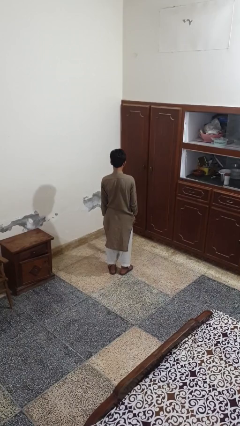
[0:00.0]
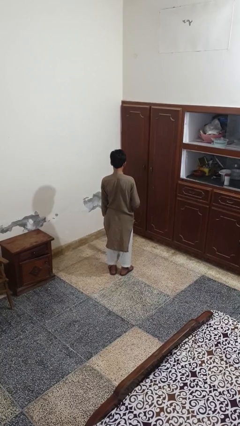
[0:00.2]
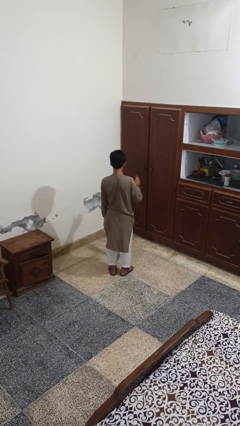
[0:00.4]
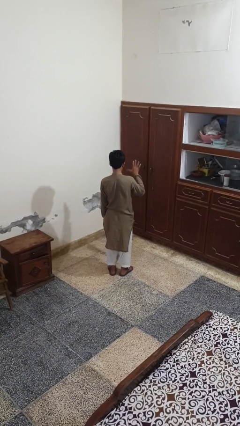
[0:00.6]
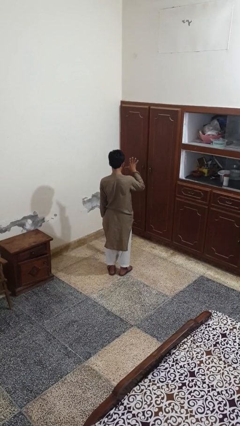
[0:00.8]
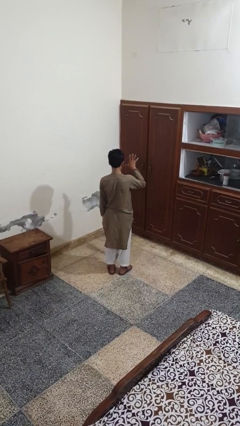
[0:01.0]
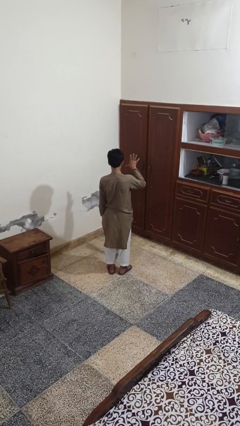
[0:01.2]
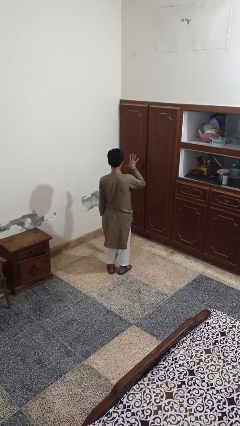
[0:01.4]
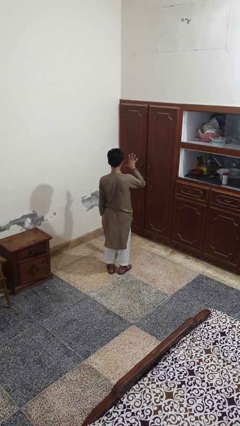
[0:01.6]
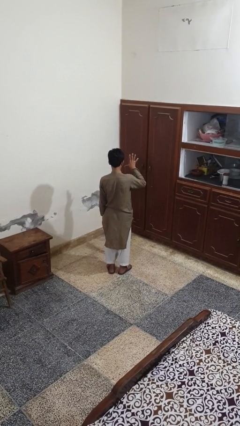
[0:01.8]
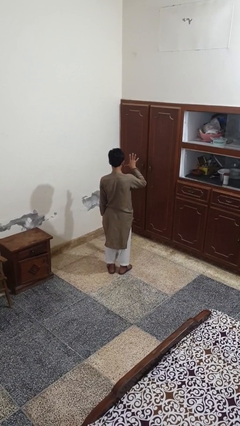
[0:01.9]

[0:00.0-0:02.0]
person gestures number five

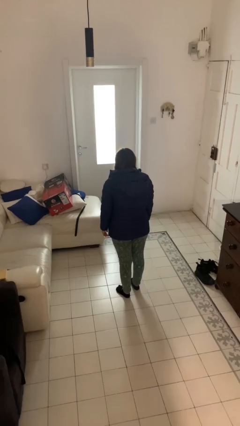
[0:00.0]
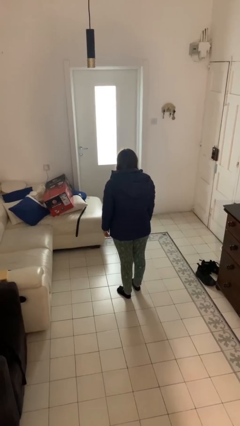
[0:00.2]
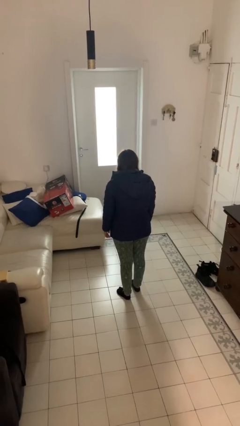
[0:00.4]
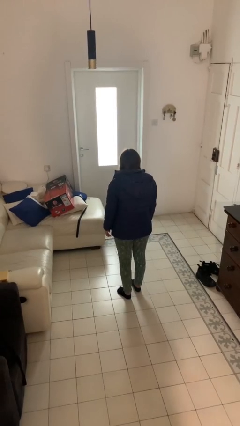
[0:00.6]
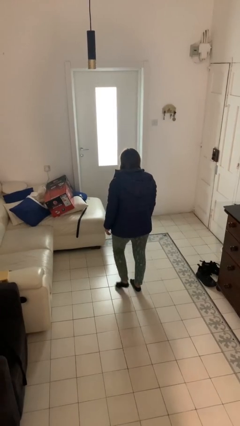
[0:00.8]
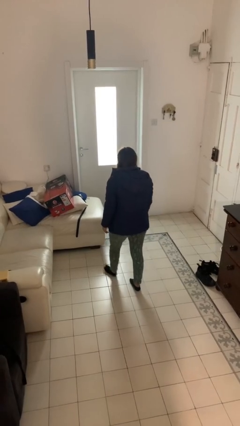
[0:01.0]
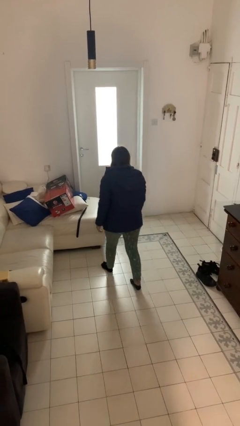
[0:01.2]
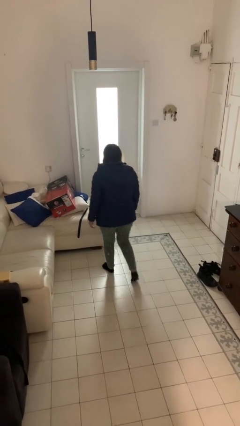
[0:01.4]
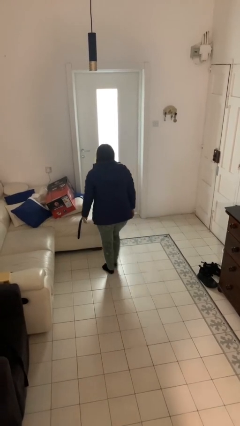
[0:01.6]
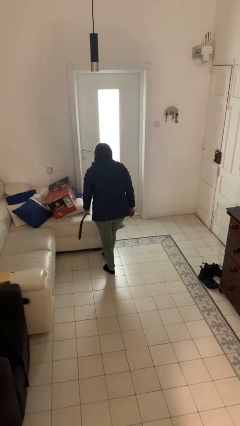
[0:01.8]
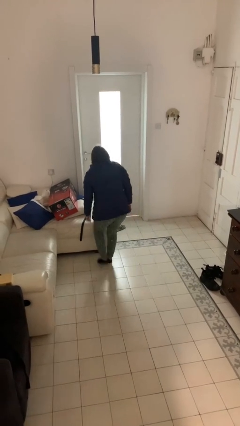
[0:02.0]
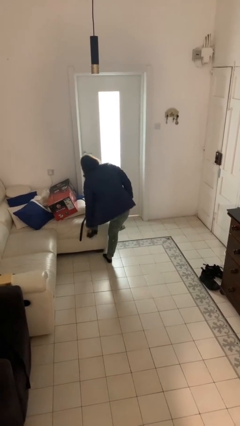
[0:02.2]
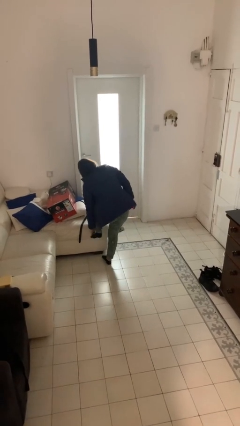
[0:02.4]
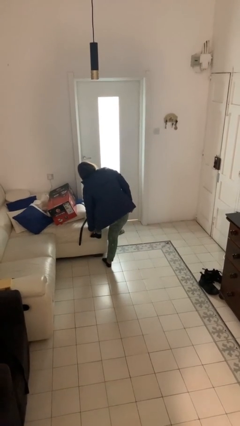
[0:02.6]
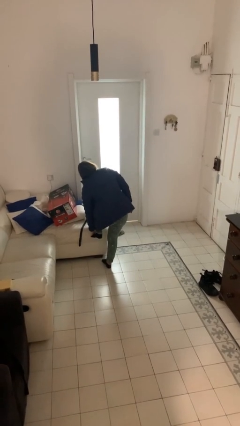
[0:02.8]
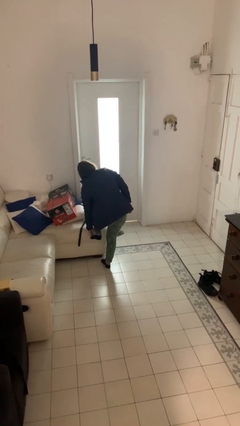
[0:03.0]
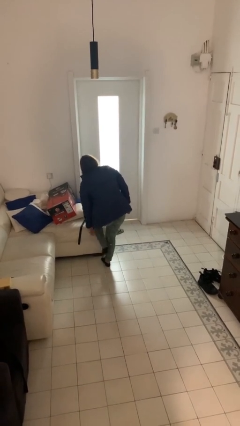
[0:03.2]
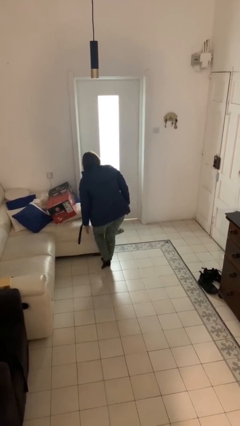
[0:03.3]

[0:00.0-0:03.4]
person stubs toe

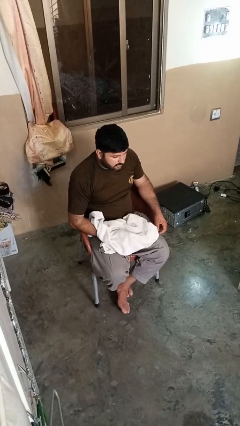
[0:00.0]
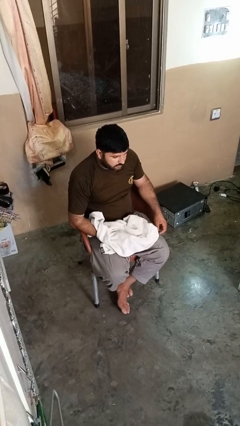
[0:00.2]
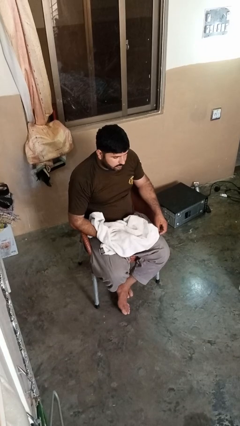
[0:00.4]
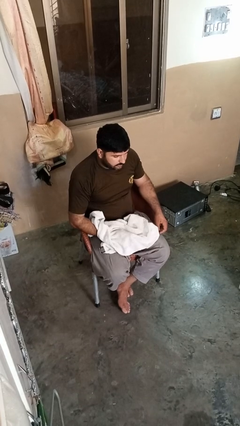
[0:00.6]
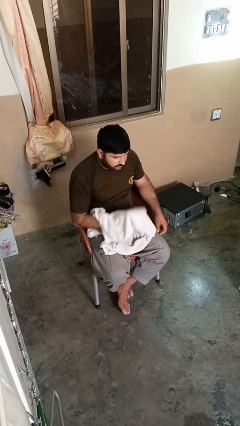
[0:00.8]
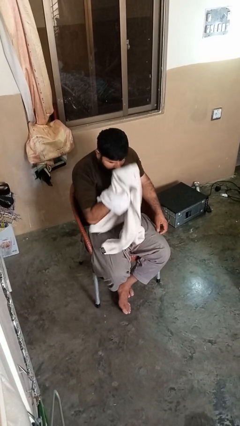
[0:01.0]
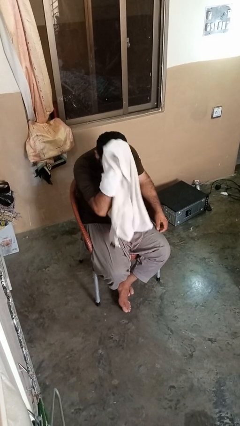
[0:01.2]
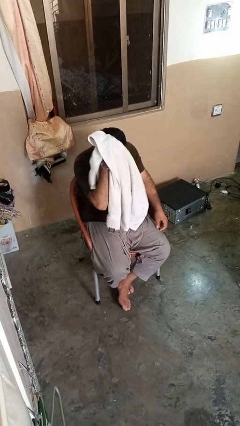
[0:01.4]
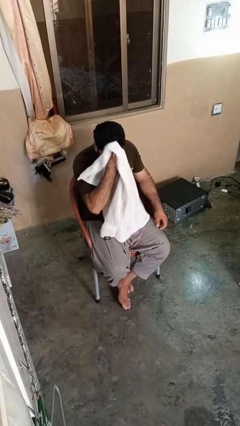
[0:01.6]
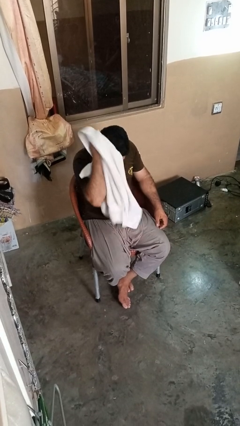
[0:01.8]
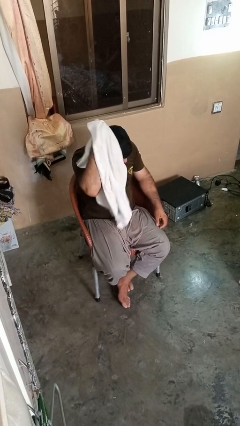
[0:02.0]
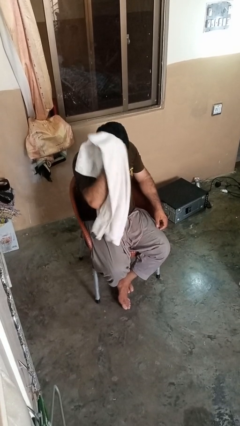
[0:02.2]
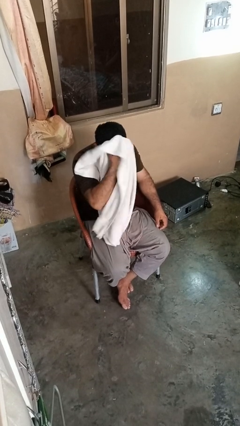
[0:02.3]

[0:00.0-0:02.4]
person dries hair with towel

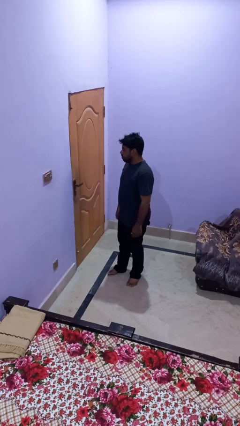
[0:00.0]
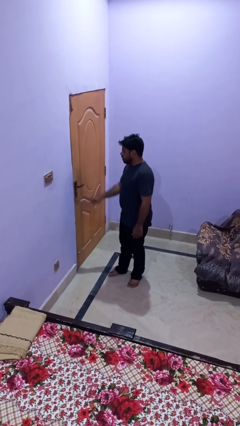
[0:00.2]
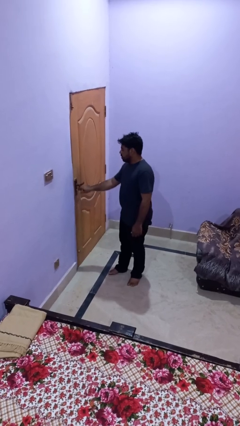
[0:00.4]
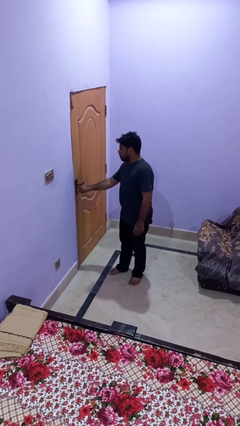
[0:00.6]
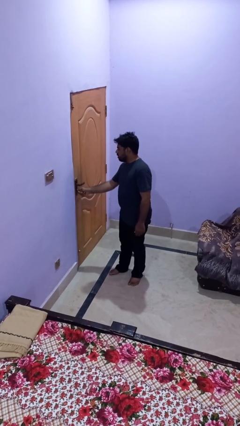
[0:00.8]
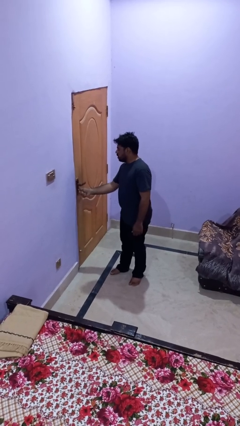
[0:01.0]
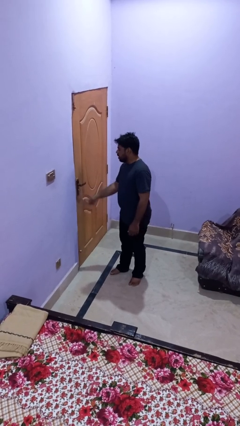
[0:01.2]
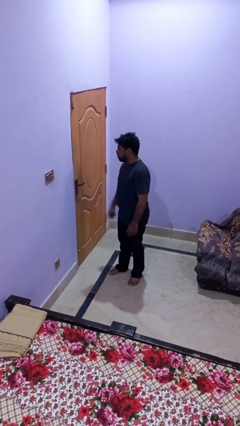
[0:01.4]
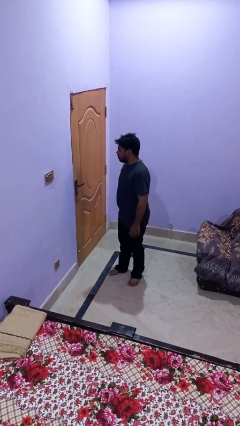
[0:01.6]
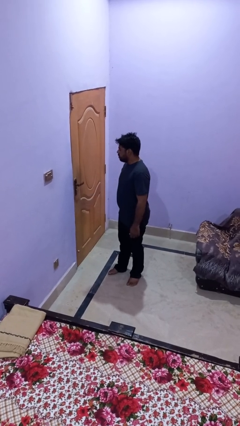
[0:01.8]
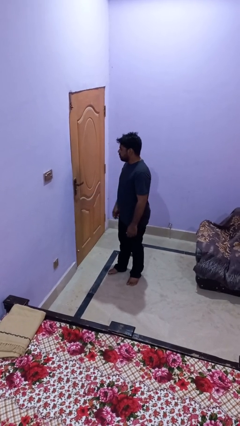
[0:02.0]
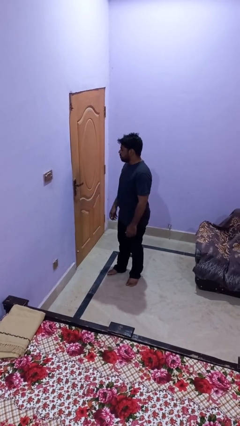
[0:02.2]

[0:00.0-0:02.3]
person unlocks door with keys

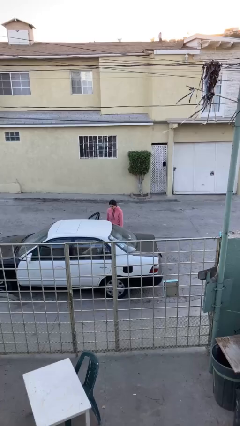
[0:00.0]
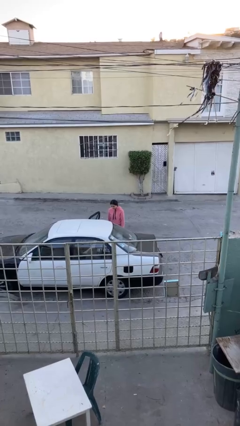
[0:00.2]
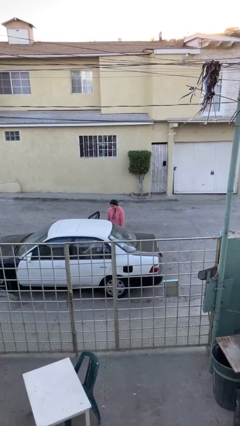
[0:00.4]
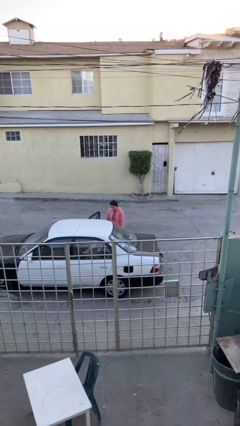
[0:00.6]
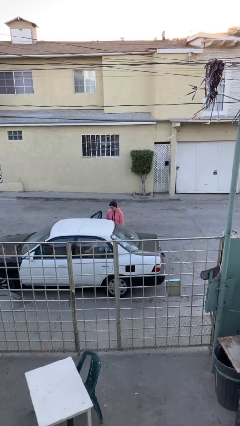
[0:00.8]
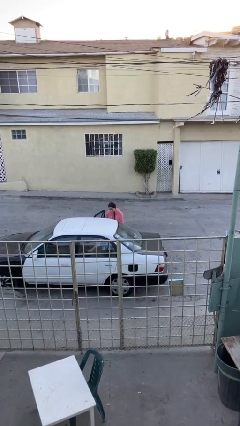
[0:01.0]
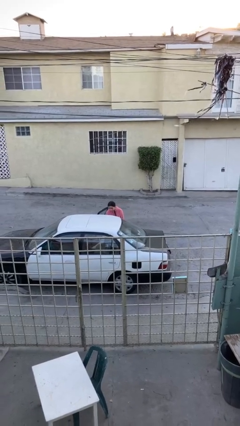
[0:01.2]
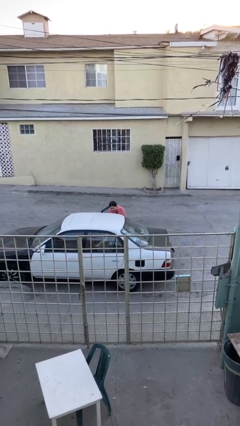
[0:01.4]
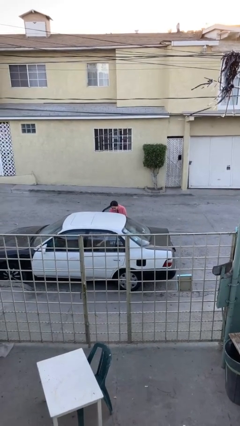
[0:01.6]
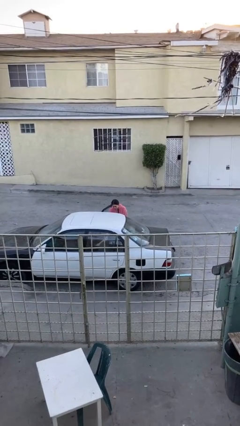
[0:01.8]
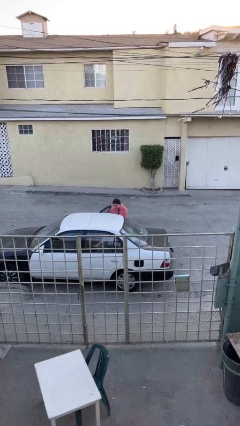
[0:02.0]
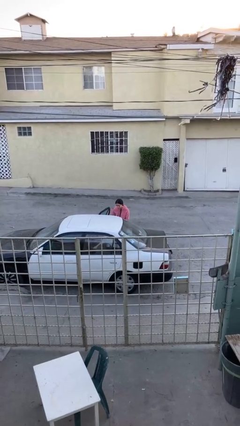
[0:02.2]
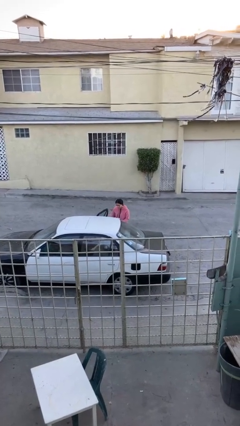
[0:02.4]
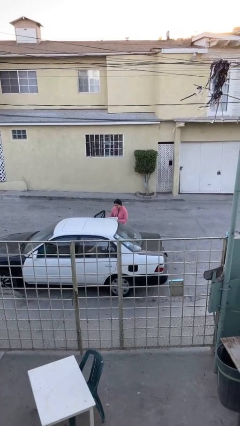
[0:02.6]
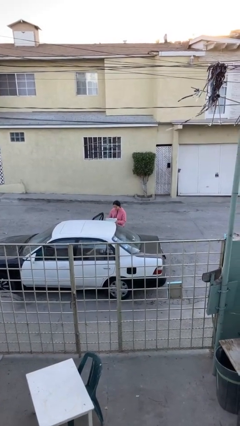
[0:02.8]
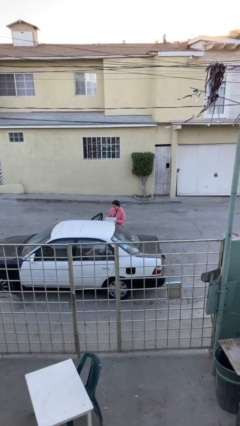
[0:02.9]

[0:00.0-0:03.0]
person unloads car

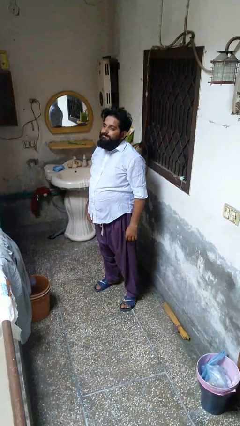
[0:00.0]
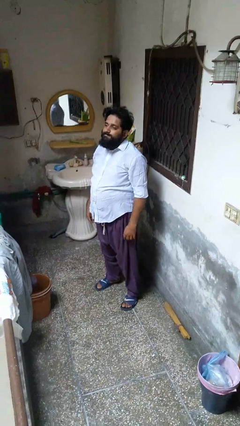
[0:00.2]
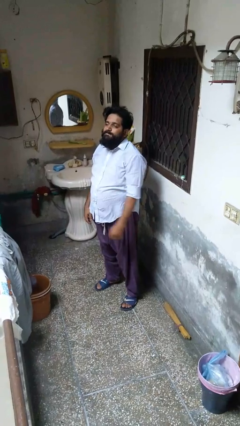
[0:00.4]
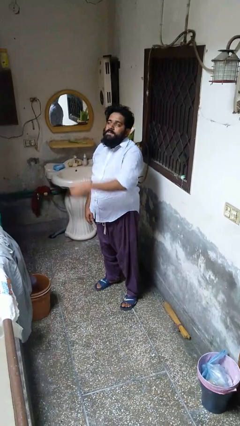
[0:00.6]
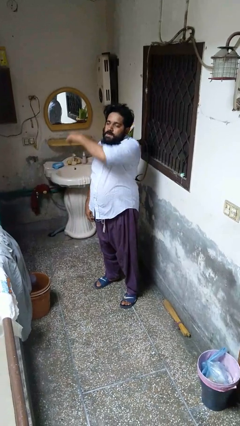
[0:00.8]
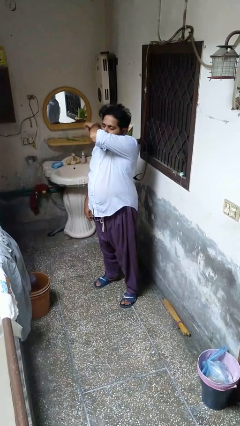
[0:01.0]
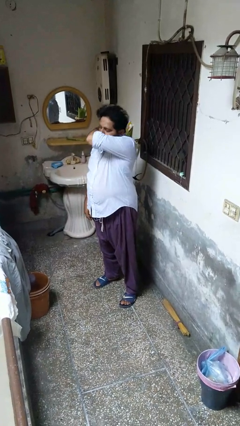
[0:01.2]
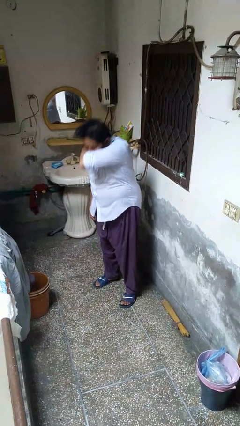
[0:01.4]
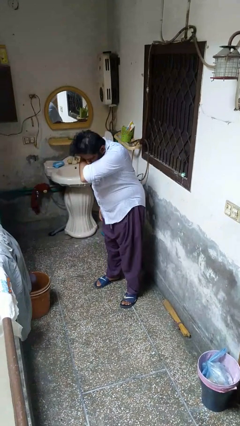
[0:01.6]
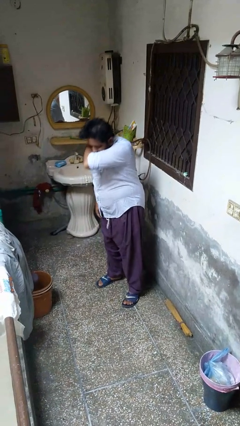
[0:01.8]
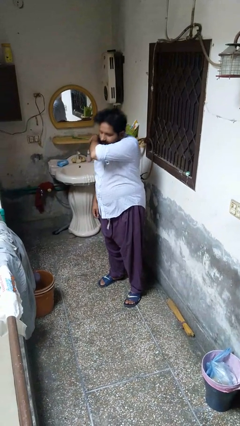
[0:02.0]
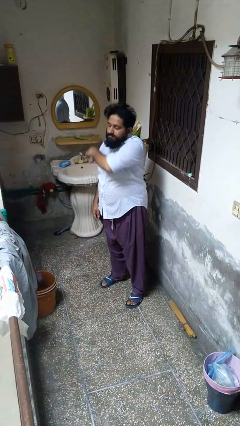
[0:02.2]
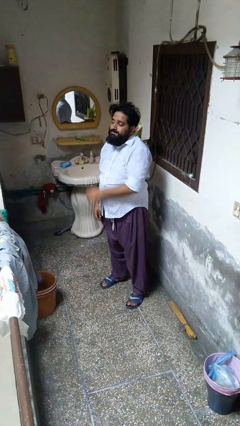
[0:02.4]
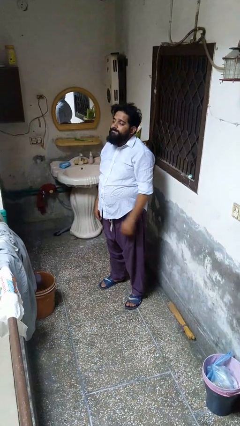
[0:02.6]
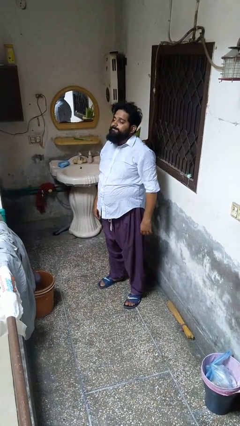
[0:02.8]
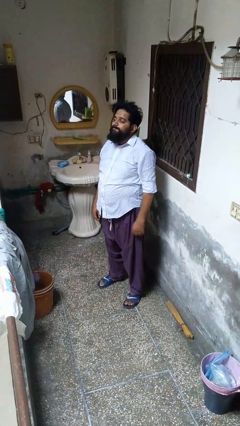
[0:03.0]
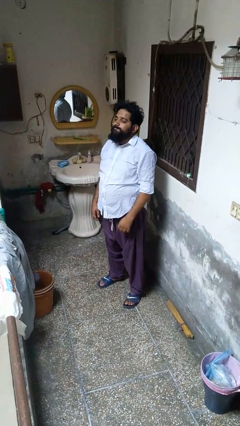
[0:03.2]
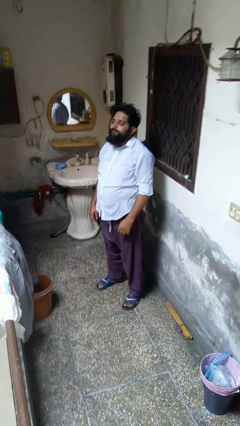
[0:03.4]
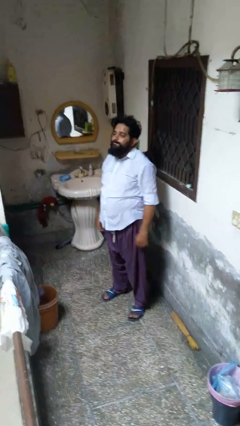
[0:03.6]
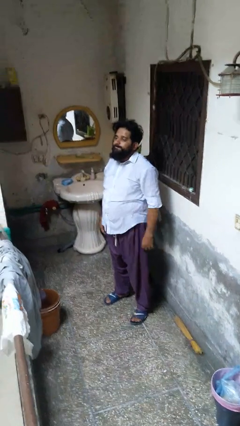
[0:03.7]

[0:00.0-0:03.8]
person sneezes into arm

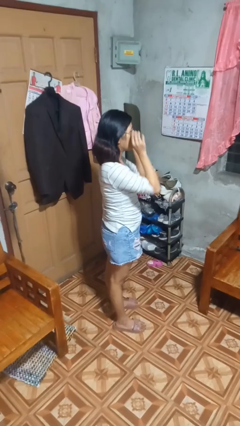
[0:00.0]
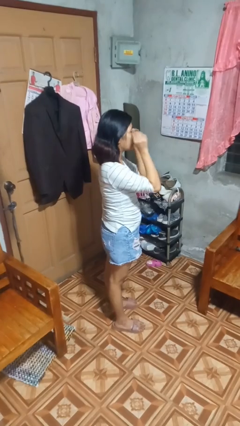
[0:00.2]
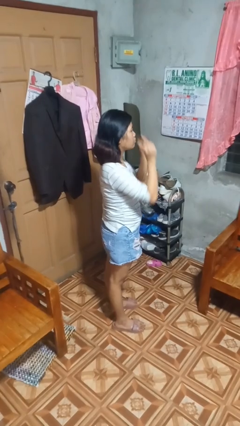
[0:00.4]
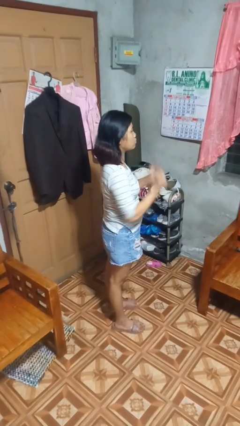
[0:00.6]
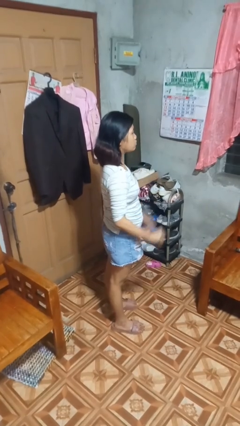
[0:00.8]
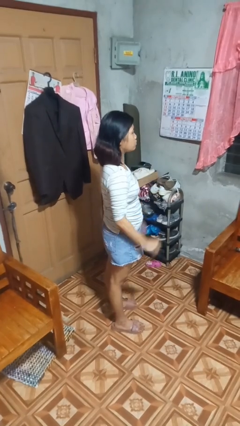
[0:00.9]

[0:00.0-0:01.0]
person takes off sunglasses
